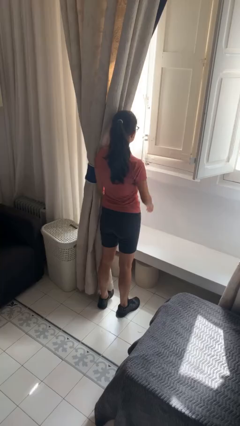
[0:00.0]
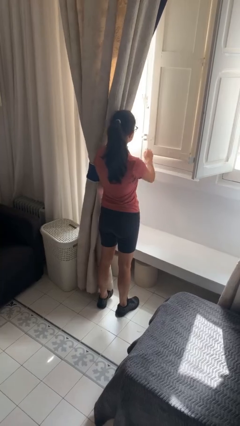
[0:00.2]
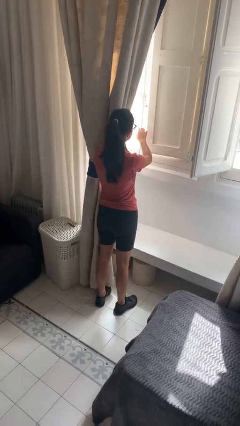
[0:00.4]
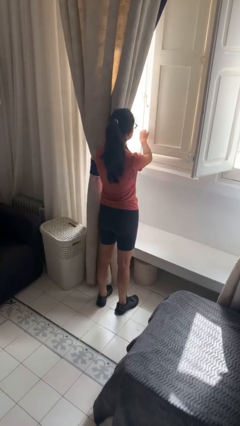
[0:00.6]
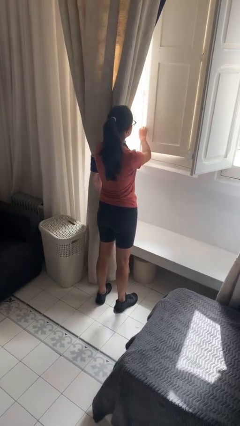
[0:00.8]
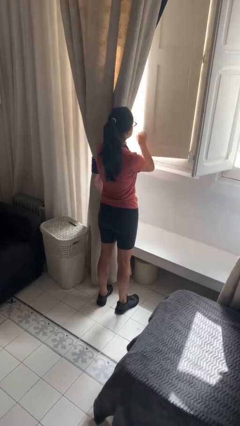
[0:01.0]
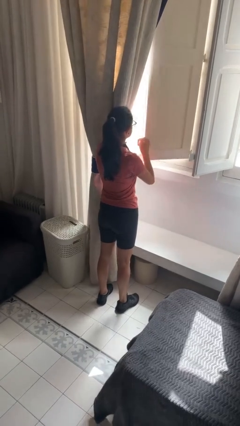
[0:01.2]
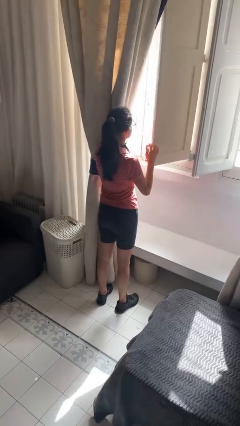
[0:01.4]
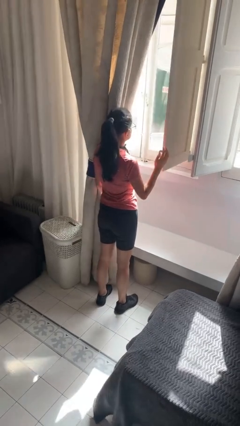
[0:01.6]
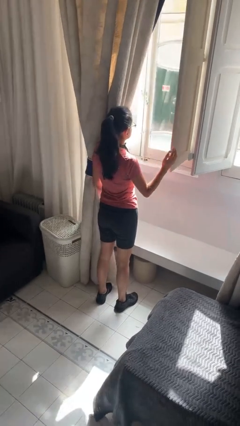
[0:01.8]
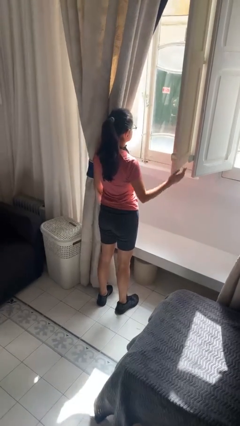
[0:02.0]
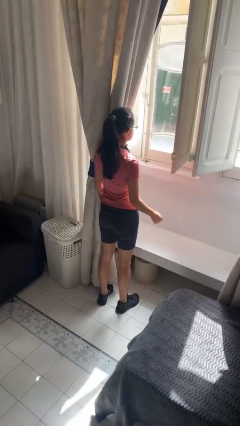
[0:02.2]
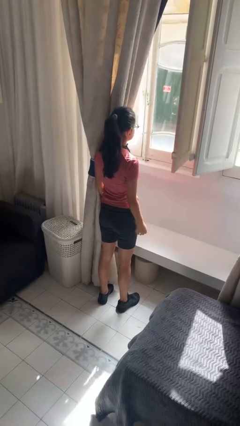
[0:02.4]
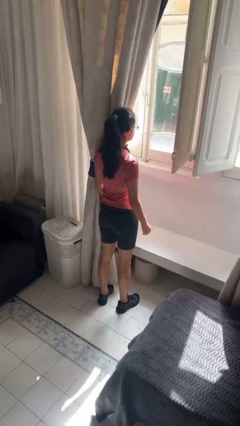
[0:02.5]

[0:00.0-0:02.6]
person opens home window

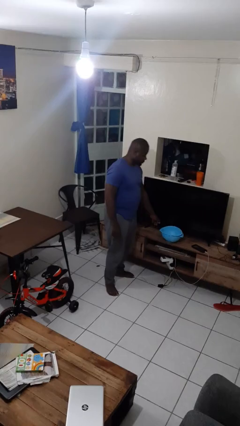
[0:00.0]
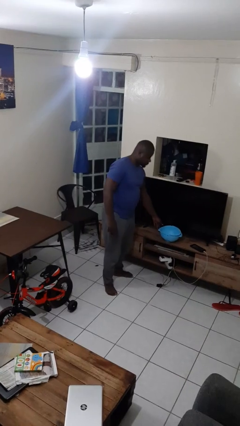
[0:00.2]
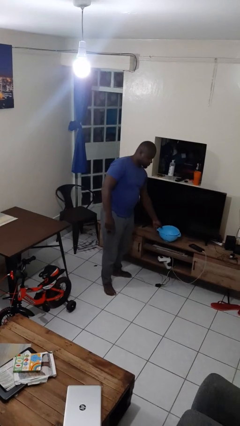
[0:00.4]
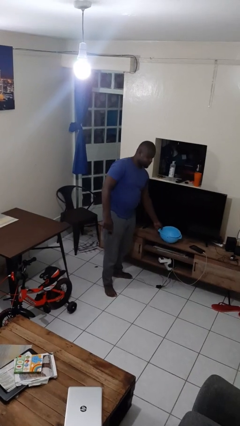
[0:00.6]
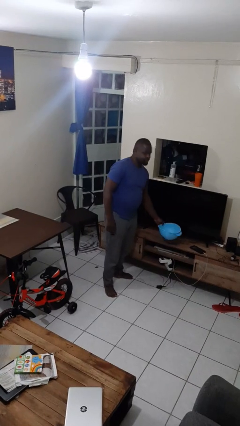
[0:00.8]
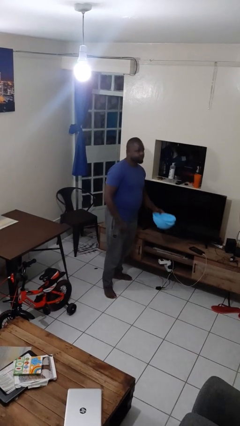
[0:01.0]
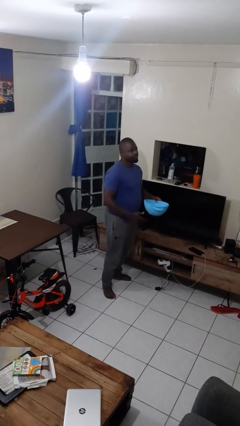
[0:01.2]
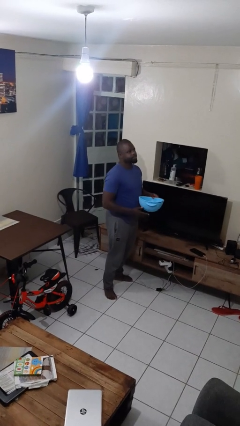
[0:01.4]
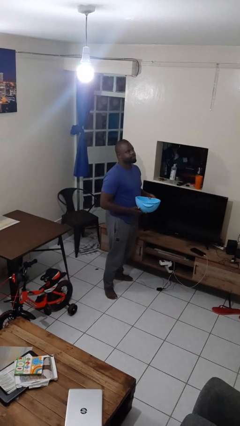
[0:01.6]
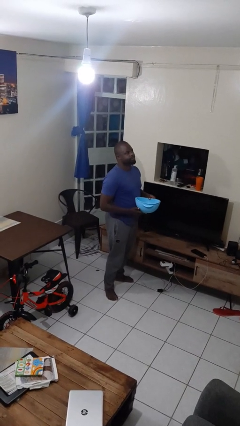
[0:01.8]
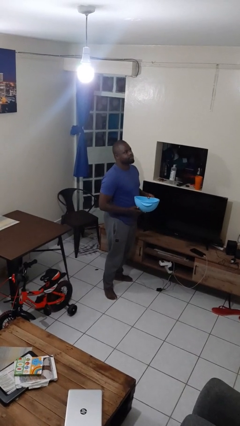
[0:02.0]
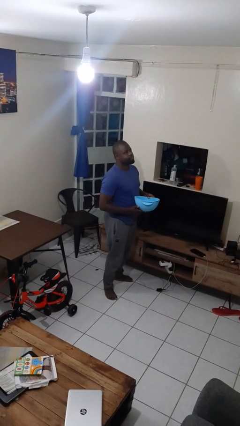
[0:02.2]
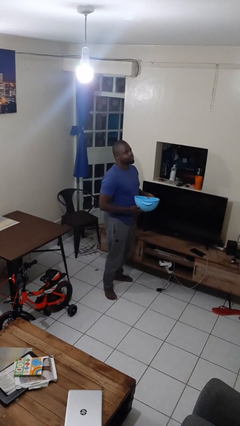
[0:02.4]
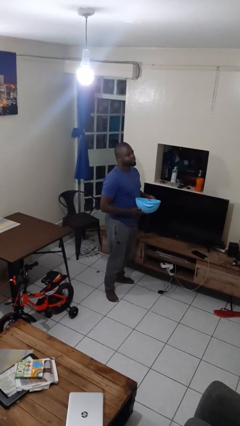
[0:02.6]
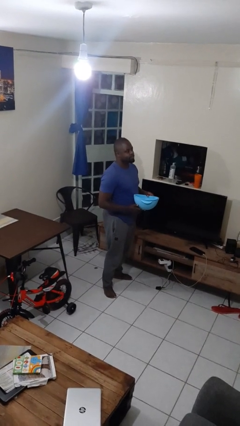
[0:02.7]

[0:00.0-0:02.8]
person picks up object from countertop

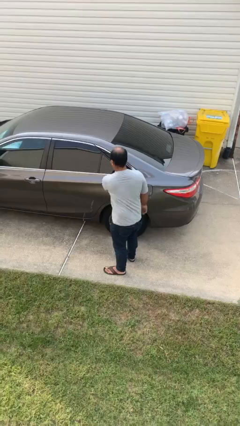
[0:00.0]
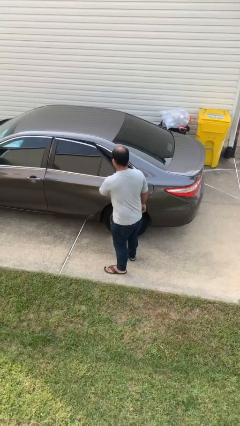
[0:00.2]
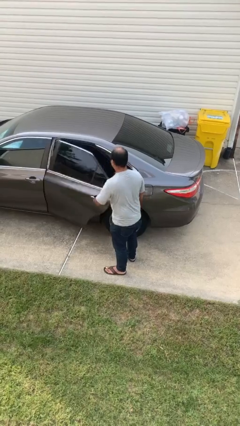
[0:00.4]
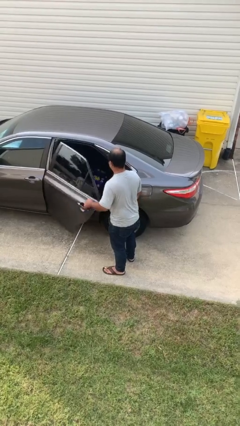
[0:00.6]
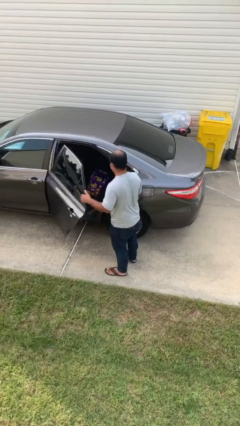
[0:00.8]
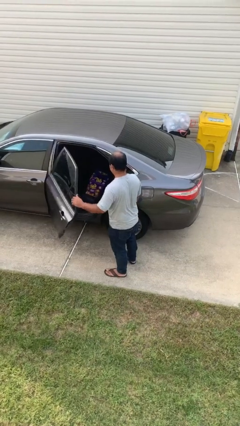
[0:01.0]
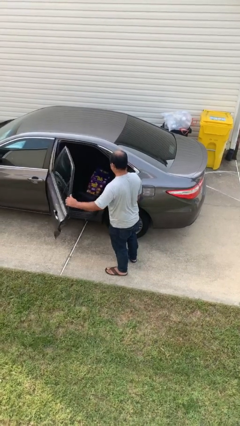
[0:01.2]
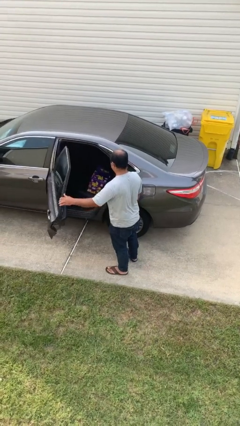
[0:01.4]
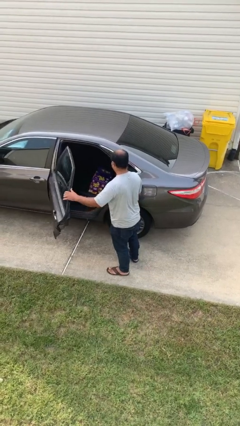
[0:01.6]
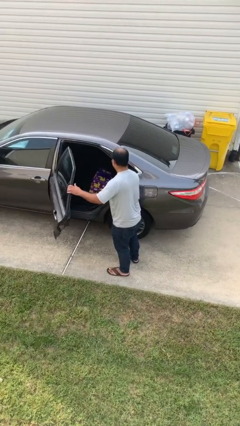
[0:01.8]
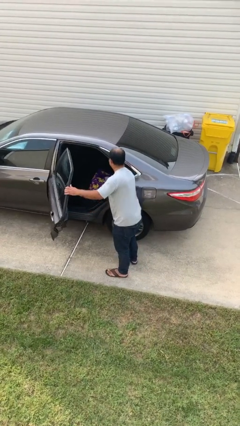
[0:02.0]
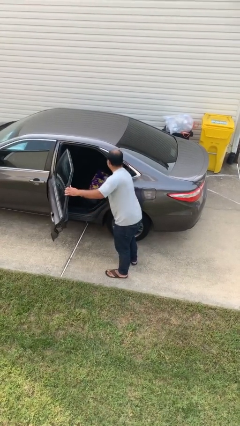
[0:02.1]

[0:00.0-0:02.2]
person opens car door

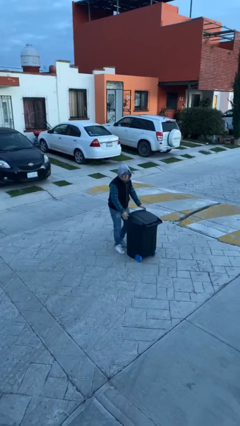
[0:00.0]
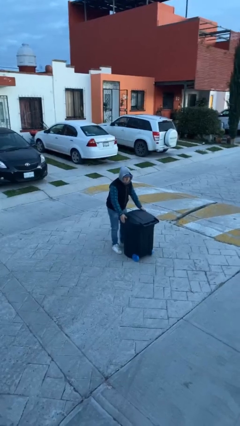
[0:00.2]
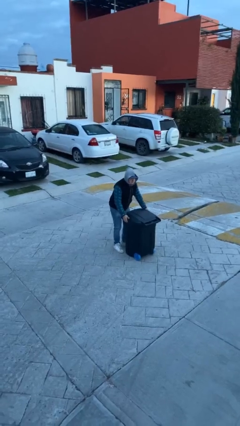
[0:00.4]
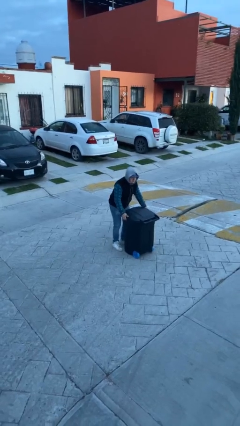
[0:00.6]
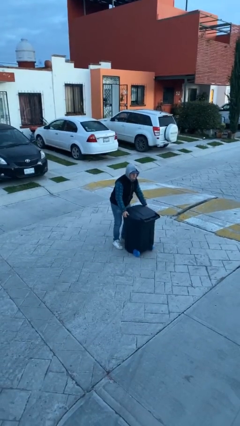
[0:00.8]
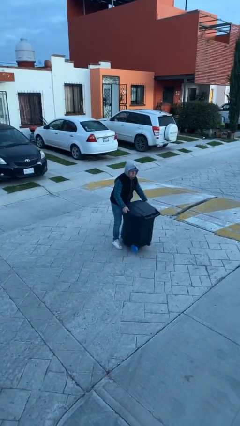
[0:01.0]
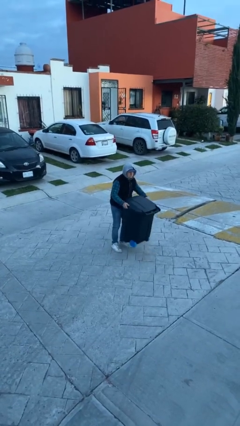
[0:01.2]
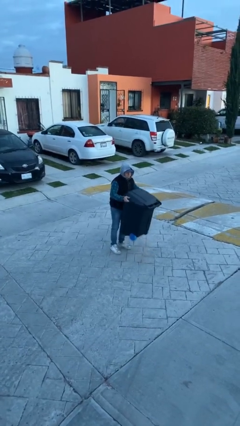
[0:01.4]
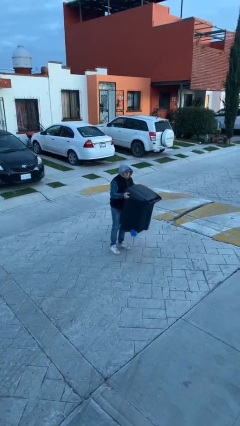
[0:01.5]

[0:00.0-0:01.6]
person picks up object from floor

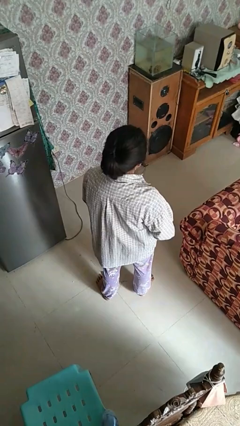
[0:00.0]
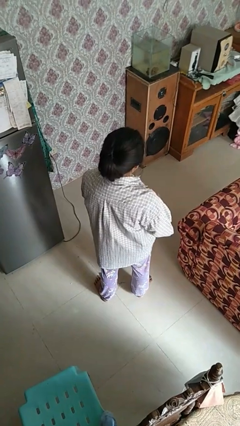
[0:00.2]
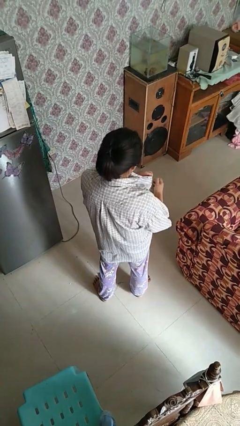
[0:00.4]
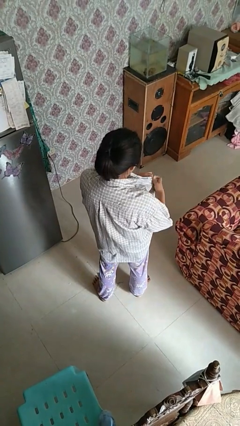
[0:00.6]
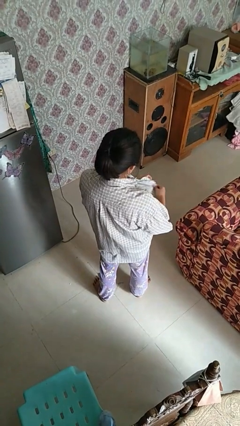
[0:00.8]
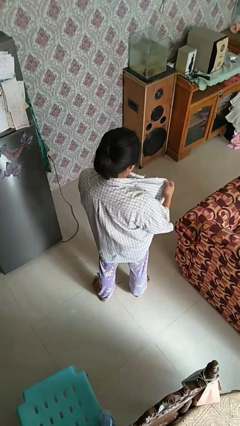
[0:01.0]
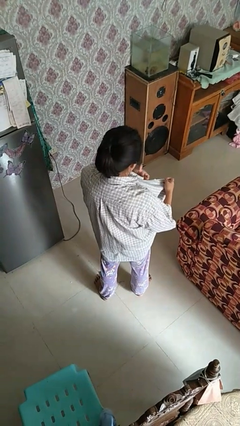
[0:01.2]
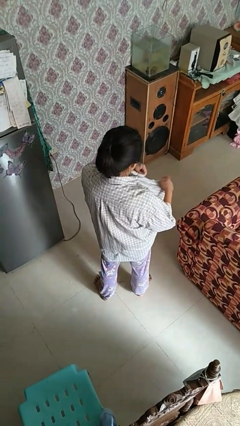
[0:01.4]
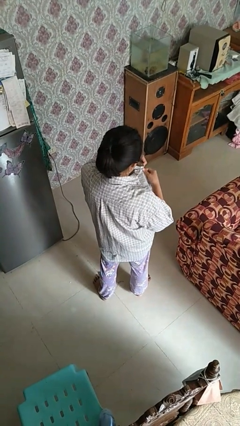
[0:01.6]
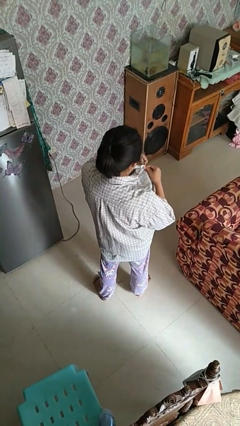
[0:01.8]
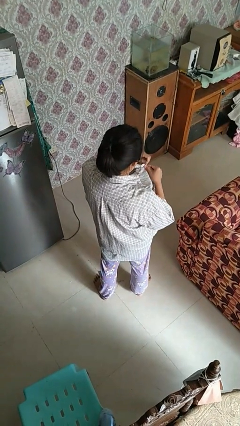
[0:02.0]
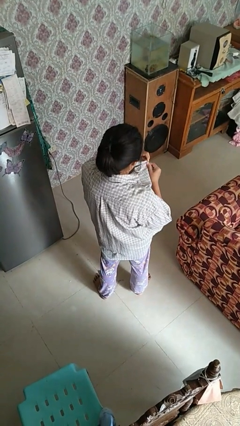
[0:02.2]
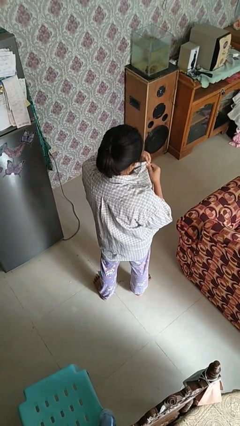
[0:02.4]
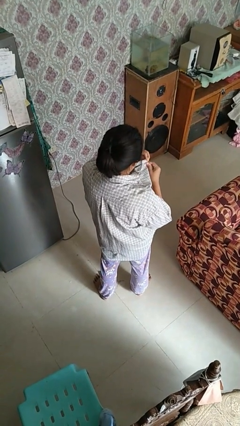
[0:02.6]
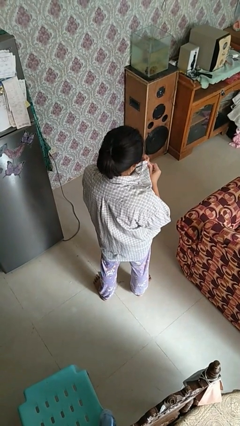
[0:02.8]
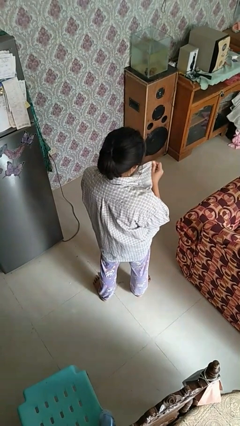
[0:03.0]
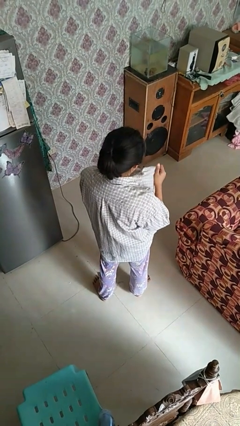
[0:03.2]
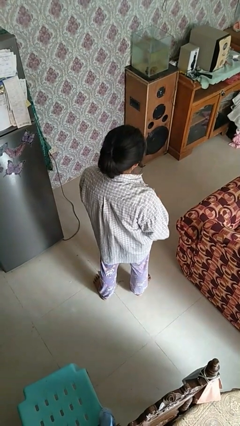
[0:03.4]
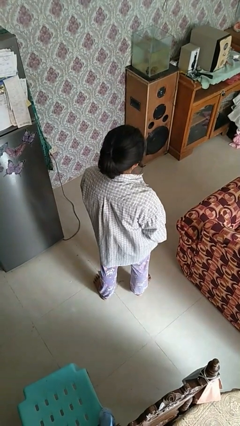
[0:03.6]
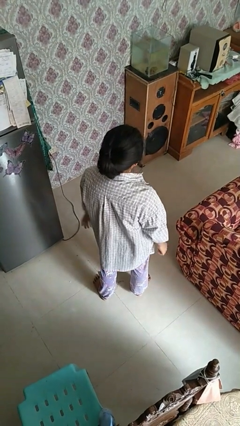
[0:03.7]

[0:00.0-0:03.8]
person unbuttons shirt

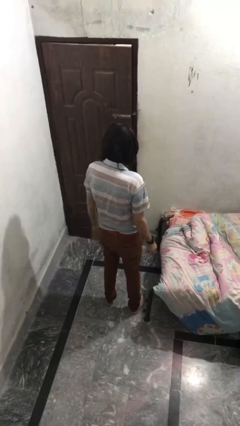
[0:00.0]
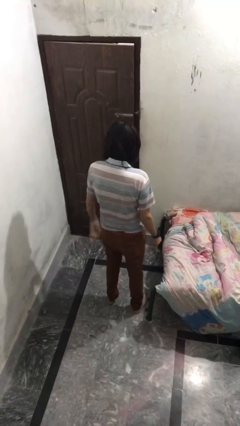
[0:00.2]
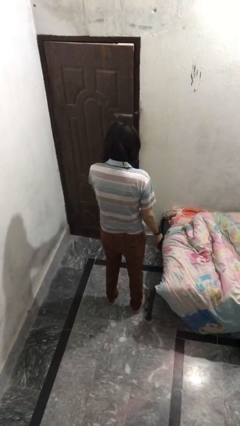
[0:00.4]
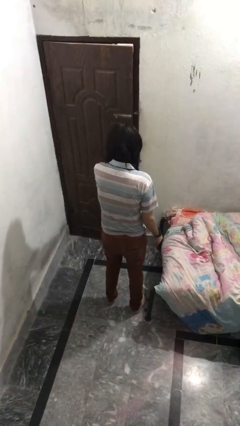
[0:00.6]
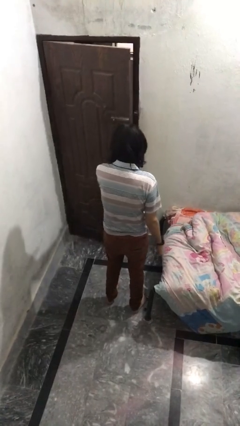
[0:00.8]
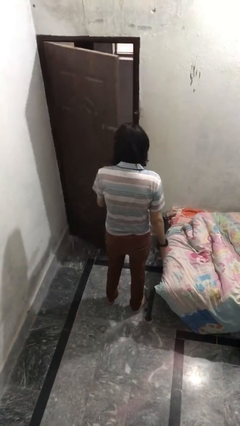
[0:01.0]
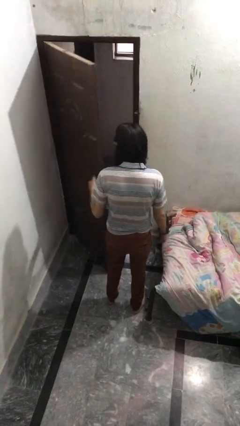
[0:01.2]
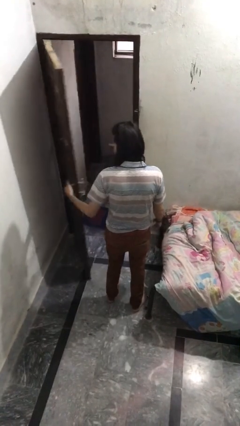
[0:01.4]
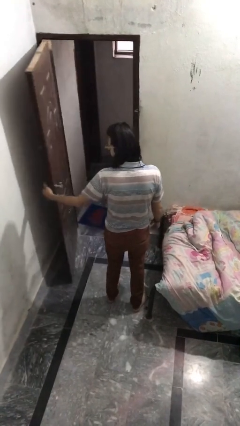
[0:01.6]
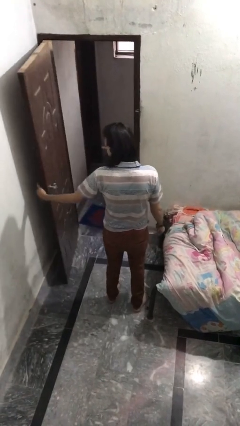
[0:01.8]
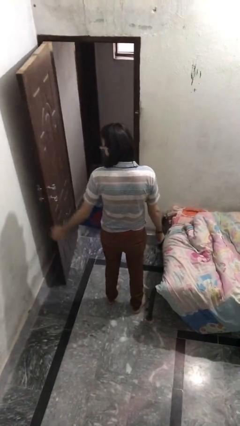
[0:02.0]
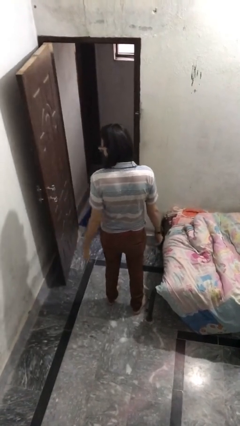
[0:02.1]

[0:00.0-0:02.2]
person opens facility door

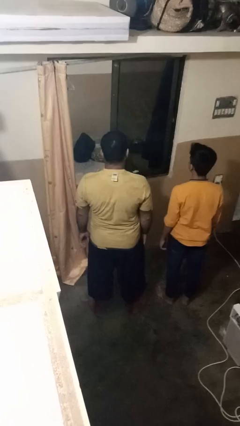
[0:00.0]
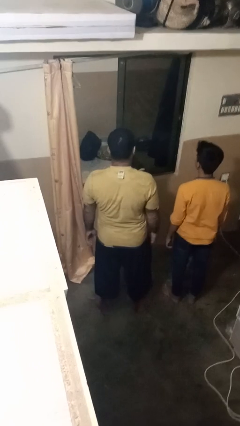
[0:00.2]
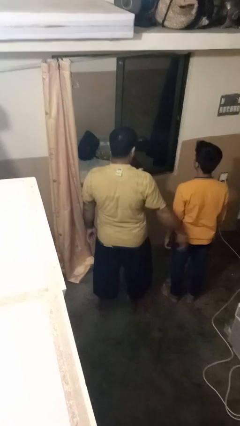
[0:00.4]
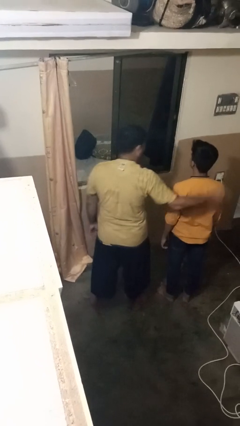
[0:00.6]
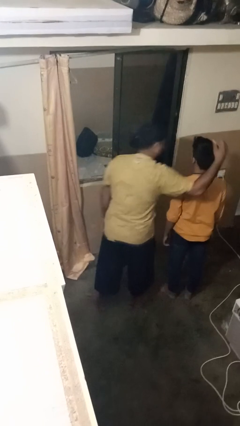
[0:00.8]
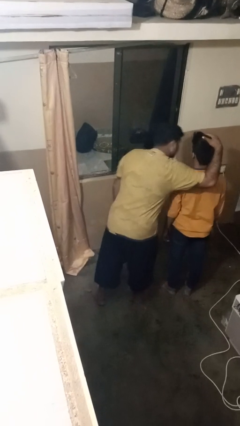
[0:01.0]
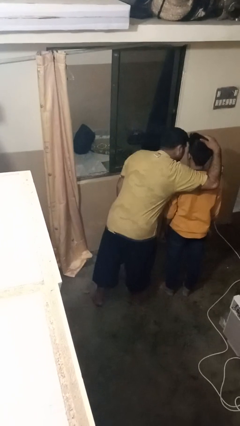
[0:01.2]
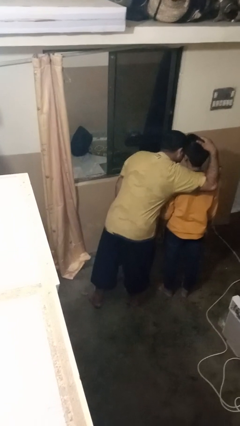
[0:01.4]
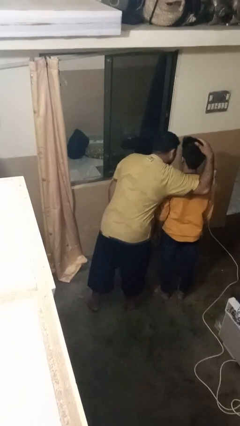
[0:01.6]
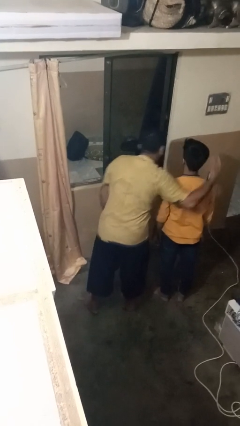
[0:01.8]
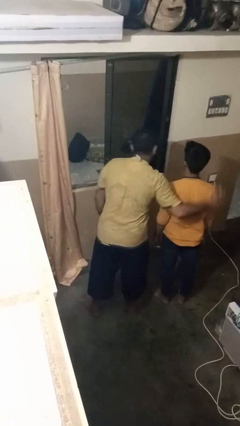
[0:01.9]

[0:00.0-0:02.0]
person kisses cheek of person
